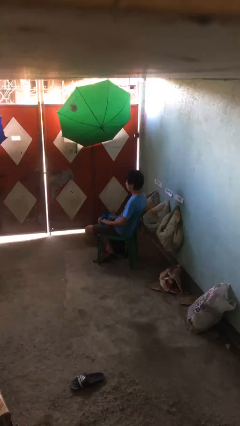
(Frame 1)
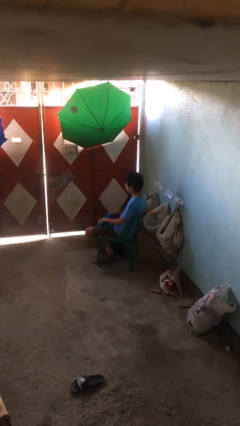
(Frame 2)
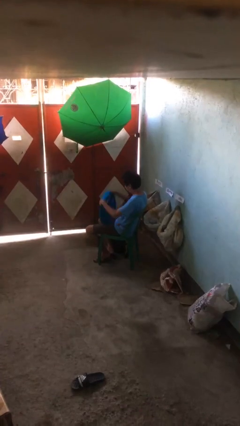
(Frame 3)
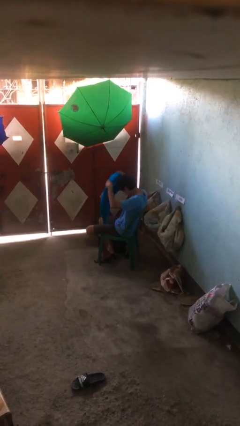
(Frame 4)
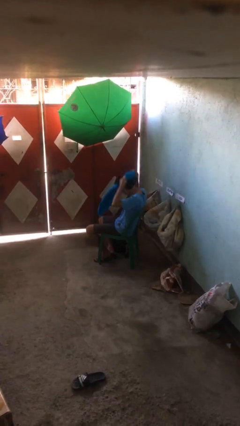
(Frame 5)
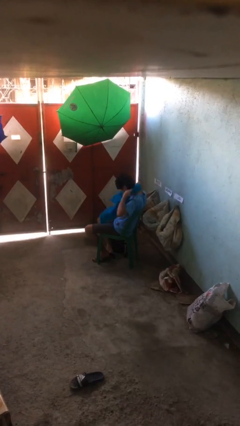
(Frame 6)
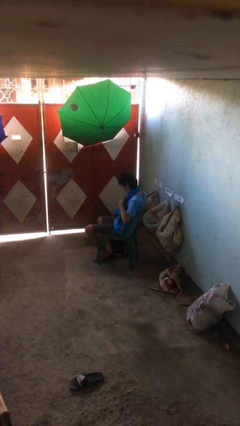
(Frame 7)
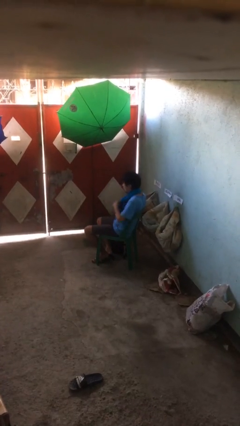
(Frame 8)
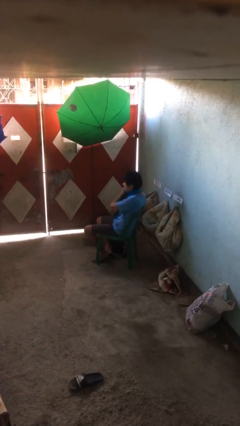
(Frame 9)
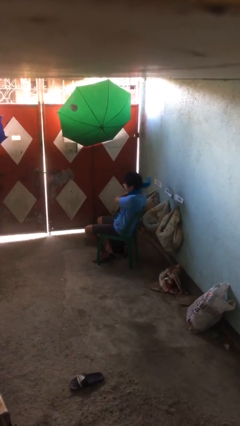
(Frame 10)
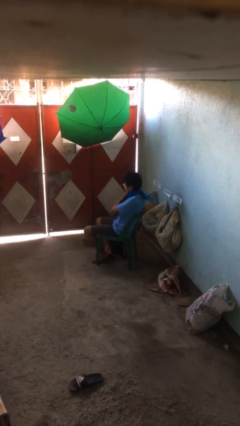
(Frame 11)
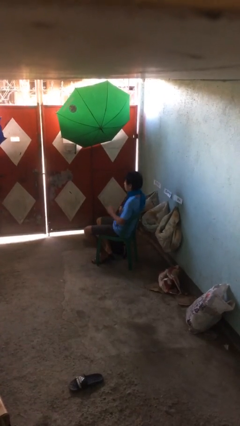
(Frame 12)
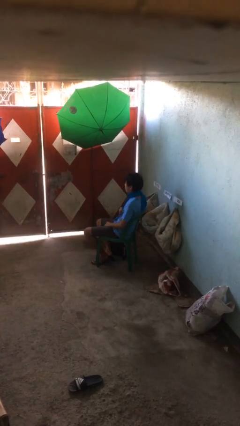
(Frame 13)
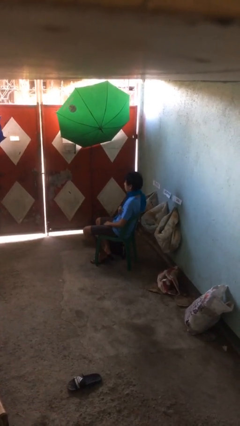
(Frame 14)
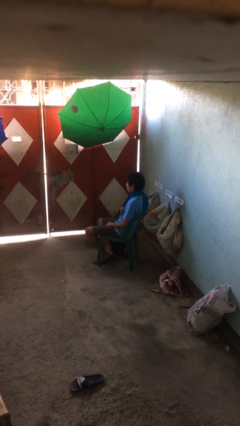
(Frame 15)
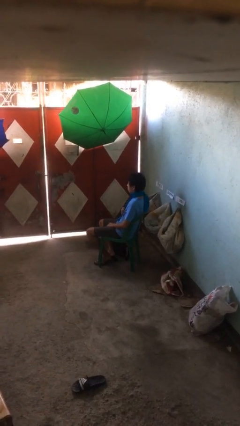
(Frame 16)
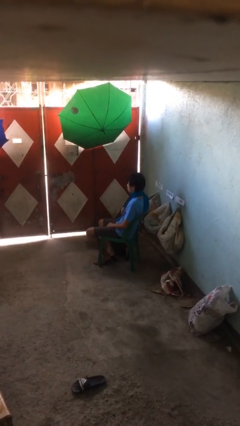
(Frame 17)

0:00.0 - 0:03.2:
person puts on scarf

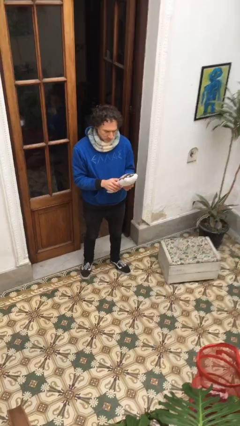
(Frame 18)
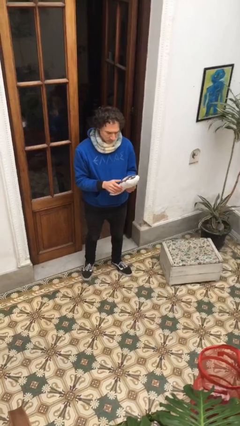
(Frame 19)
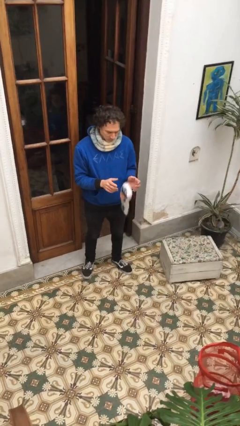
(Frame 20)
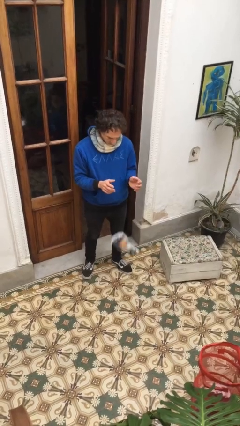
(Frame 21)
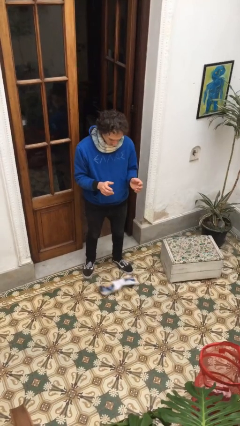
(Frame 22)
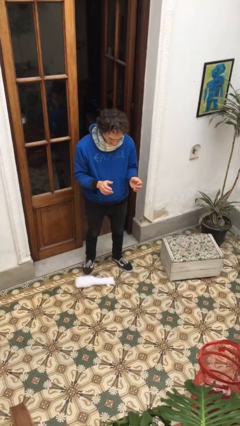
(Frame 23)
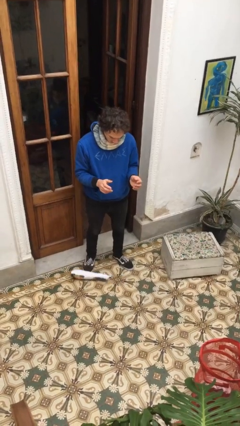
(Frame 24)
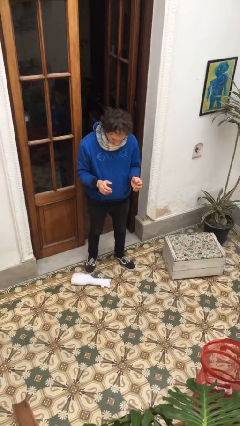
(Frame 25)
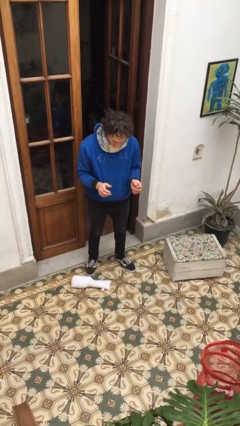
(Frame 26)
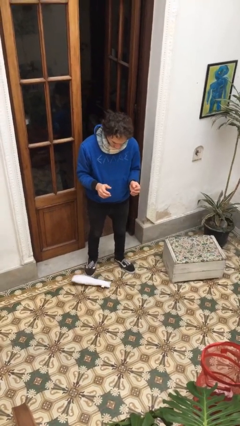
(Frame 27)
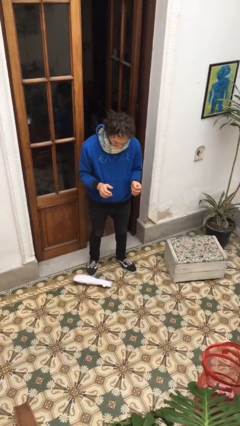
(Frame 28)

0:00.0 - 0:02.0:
person drops object

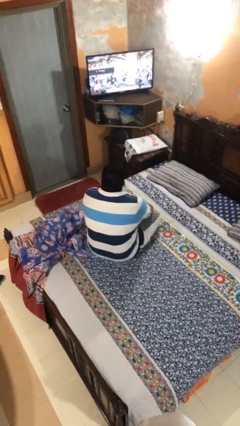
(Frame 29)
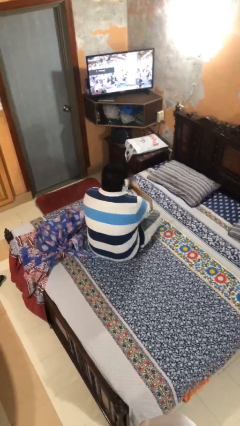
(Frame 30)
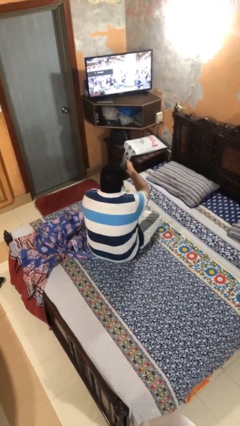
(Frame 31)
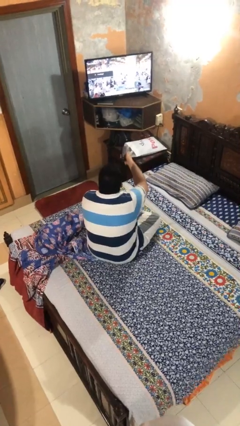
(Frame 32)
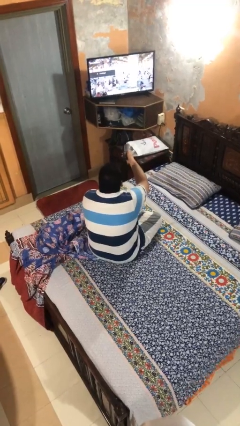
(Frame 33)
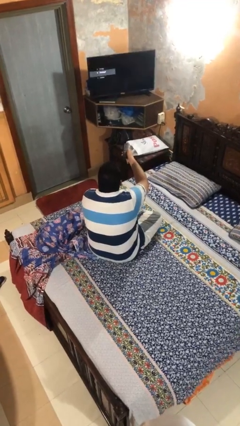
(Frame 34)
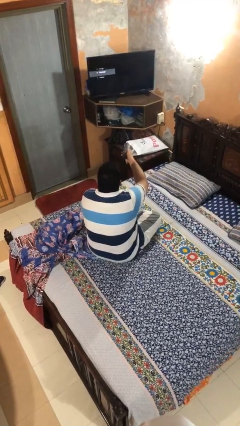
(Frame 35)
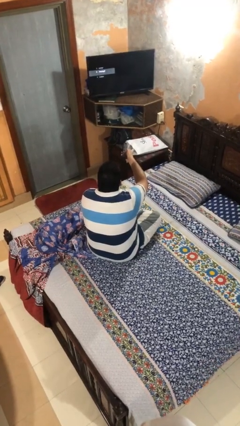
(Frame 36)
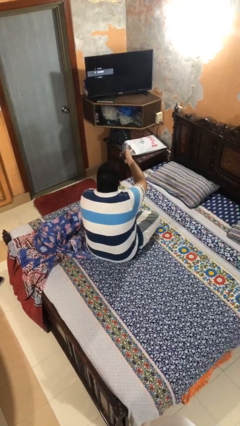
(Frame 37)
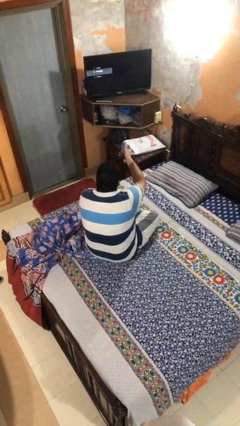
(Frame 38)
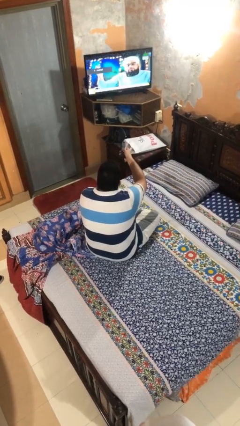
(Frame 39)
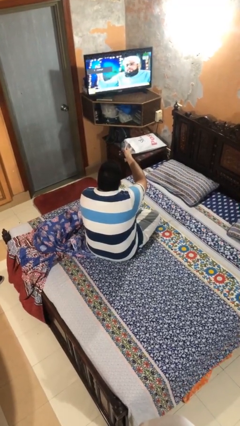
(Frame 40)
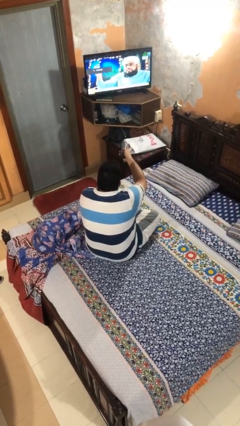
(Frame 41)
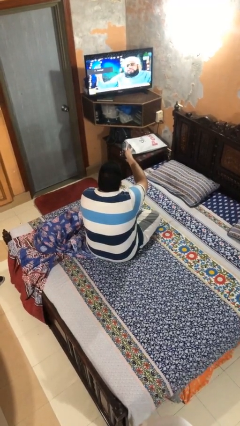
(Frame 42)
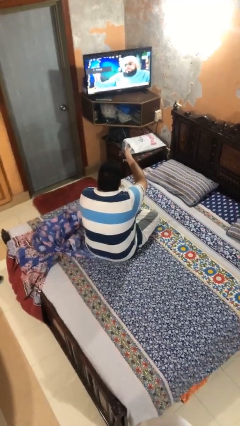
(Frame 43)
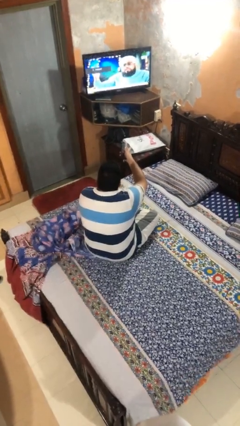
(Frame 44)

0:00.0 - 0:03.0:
person uses television remote

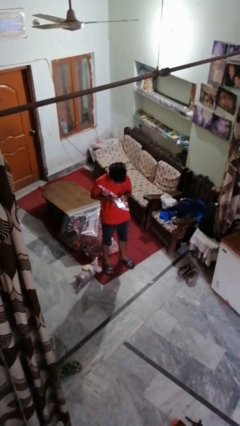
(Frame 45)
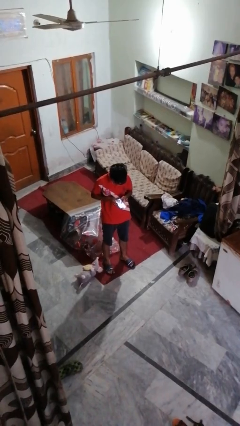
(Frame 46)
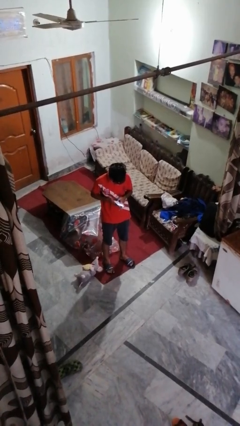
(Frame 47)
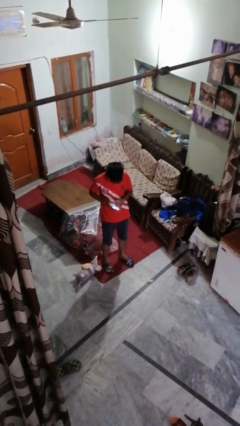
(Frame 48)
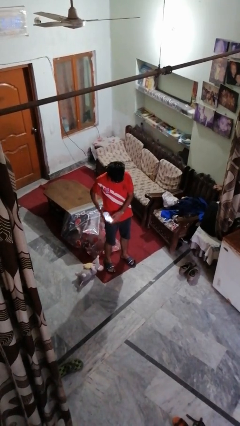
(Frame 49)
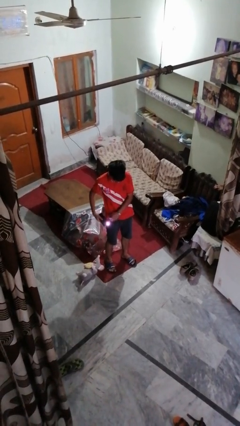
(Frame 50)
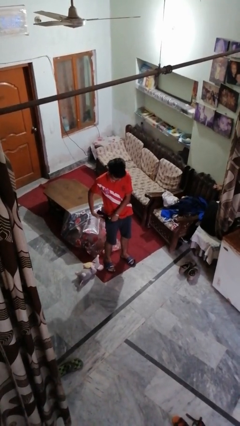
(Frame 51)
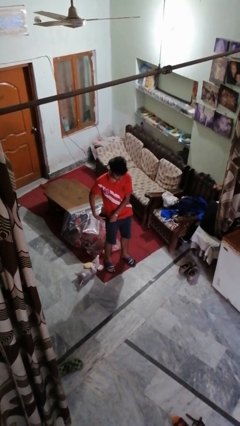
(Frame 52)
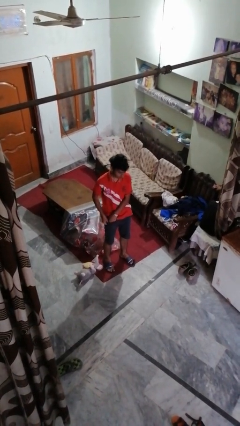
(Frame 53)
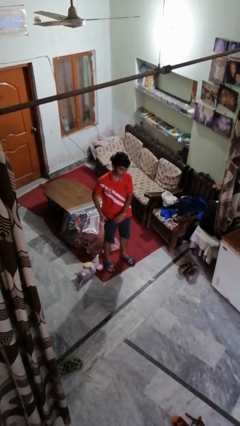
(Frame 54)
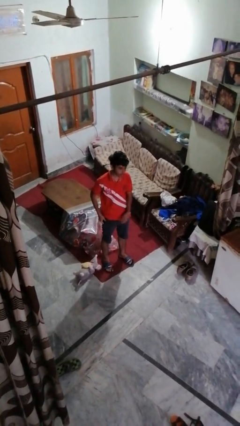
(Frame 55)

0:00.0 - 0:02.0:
person puts phone into pocket

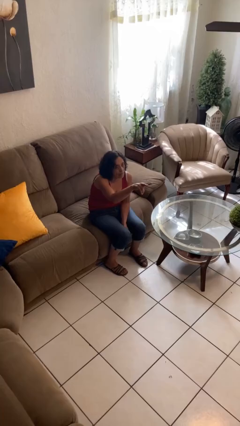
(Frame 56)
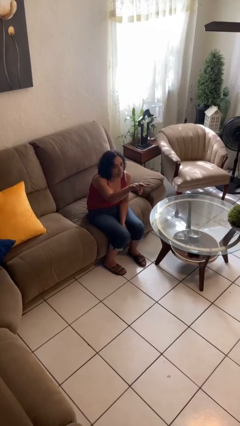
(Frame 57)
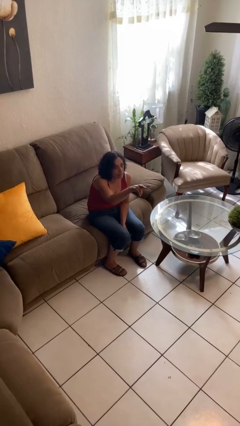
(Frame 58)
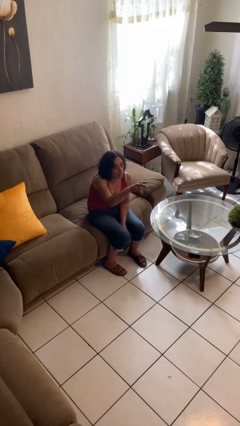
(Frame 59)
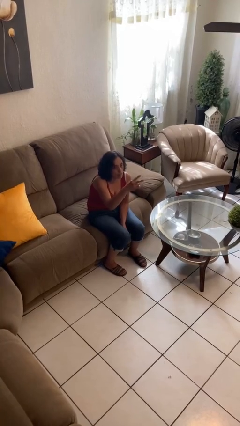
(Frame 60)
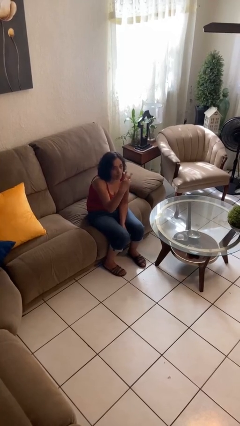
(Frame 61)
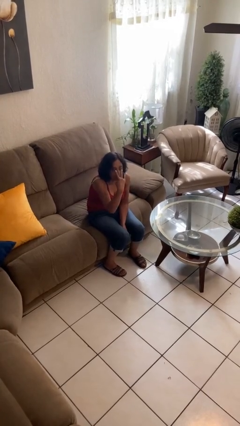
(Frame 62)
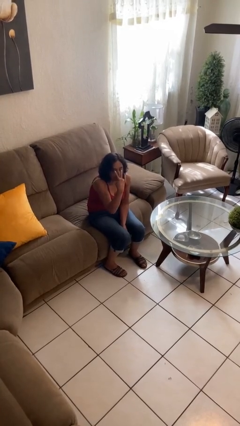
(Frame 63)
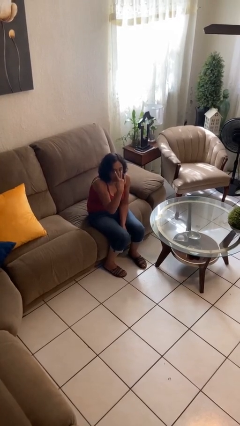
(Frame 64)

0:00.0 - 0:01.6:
person gestures watch closely

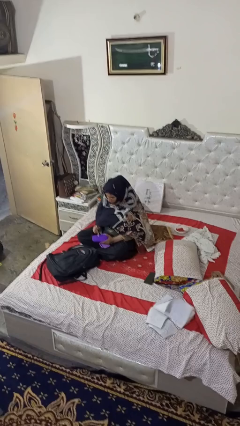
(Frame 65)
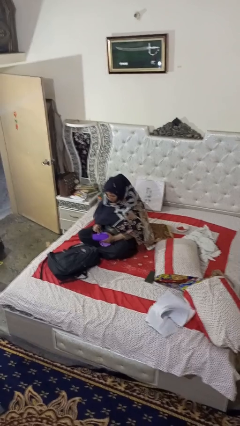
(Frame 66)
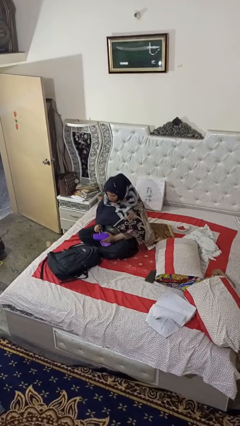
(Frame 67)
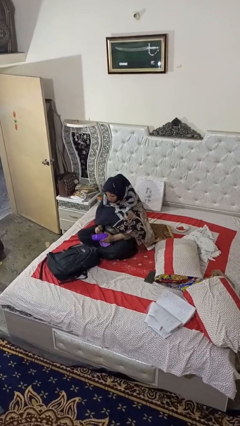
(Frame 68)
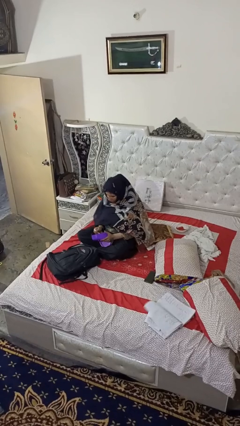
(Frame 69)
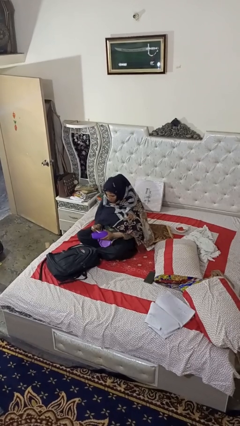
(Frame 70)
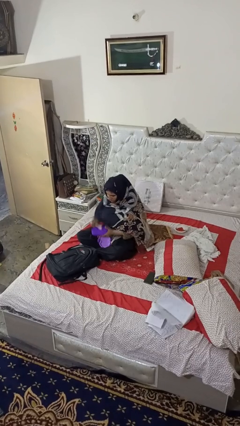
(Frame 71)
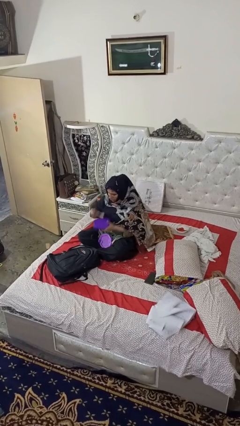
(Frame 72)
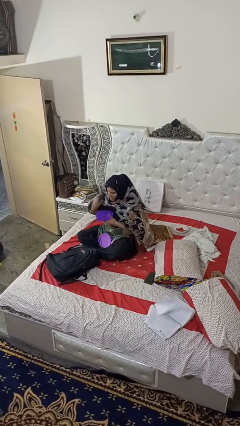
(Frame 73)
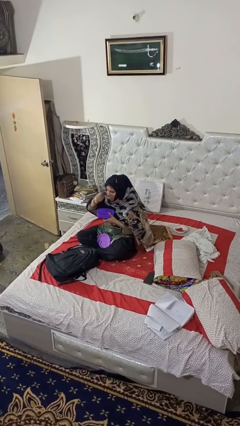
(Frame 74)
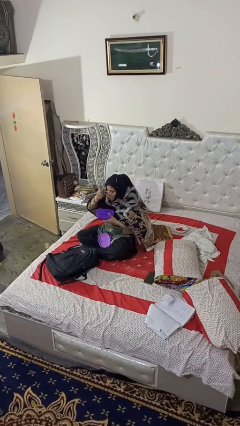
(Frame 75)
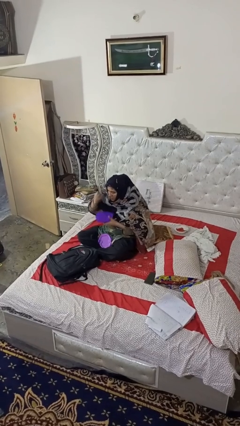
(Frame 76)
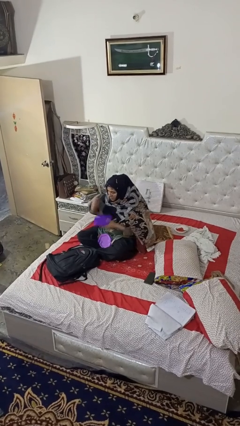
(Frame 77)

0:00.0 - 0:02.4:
person eats snack from bag

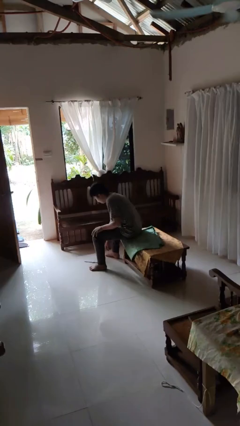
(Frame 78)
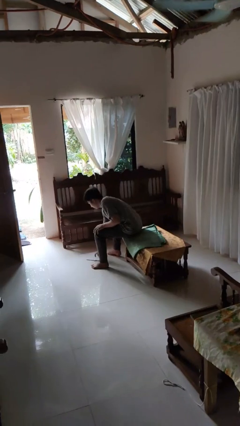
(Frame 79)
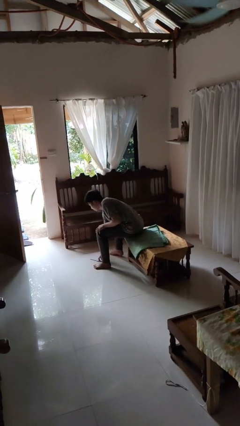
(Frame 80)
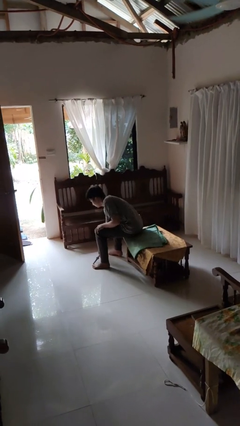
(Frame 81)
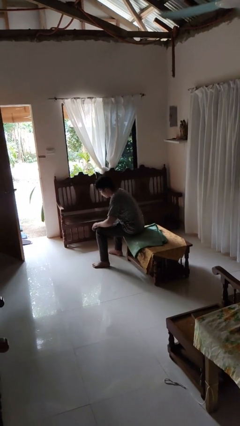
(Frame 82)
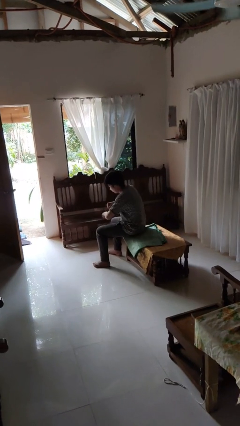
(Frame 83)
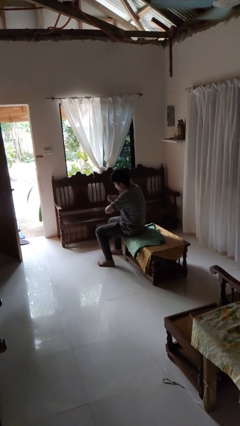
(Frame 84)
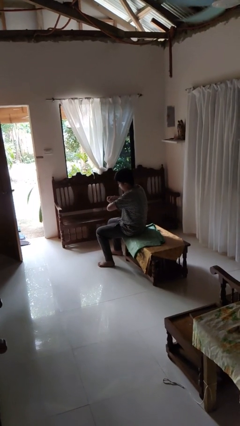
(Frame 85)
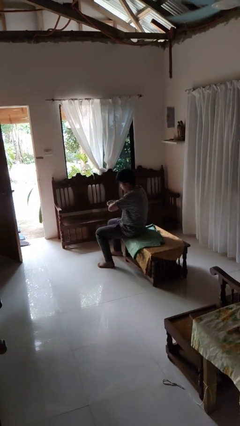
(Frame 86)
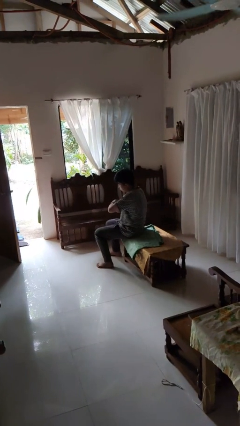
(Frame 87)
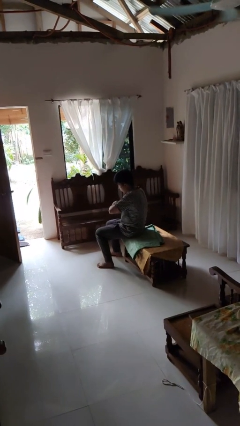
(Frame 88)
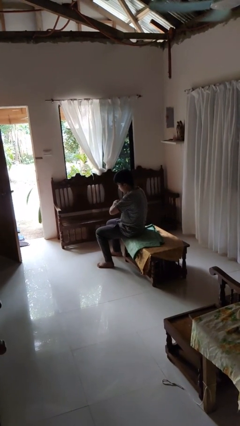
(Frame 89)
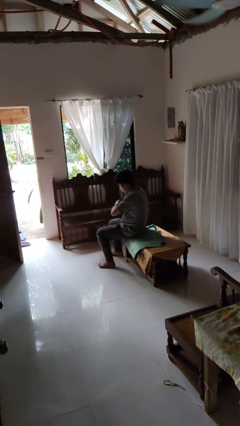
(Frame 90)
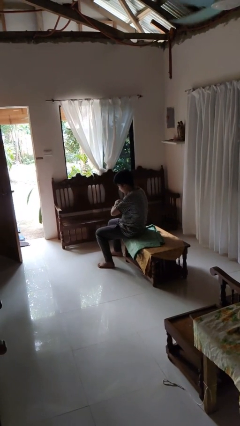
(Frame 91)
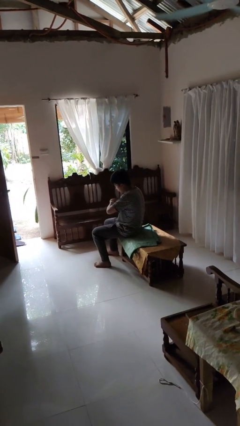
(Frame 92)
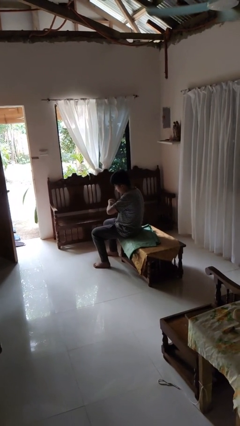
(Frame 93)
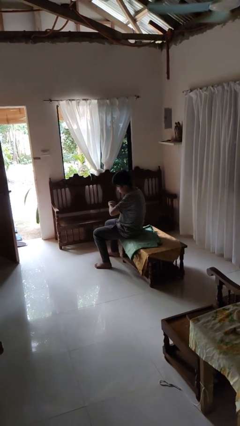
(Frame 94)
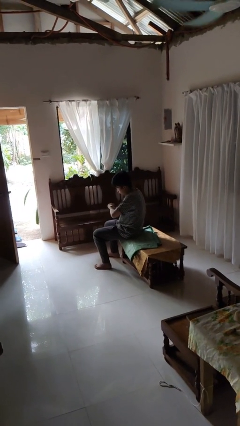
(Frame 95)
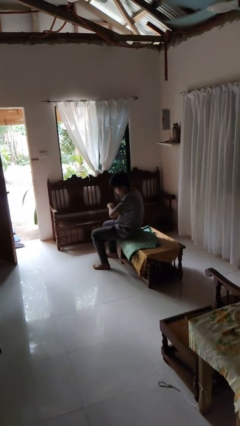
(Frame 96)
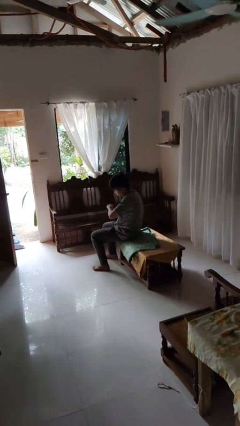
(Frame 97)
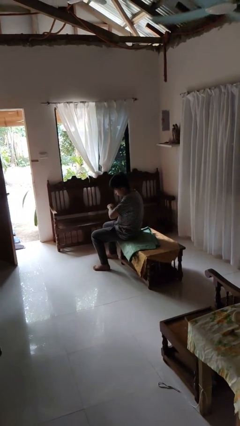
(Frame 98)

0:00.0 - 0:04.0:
person puts on wristwatch
